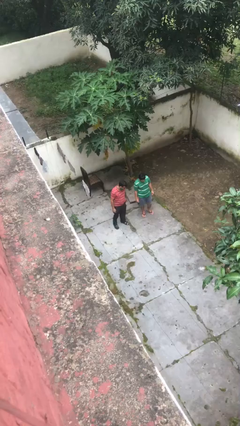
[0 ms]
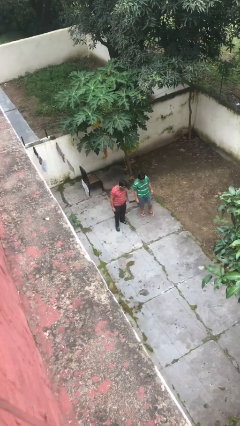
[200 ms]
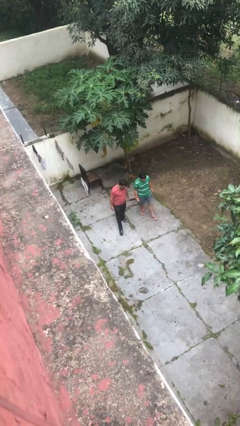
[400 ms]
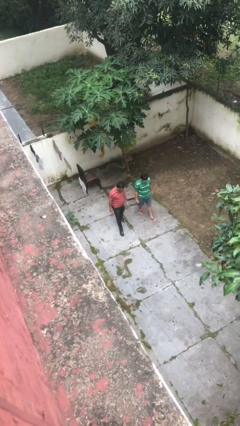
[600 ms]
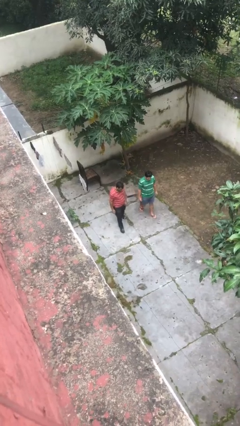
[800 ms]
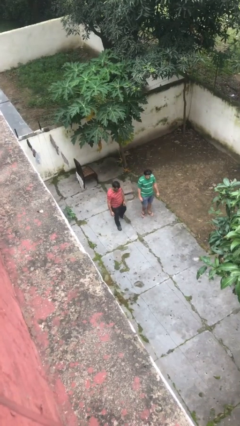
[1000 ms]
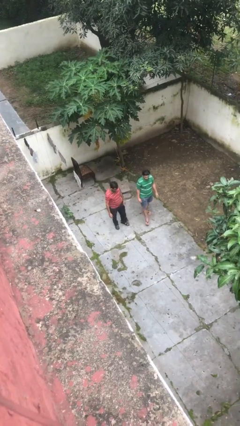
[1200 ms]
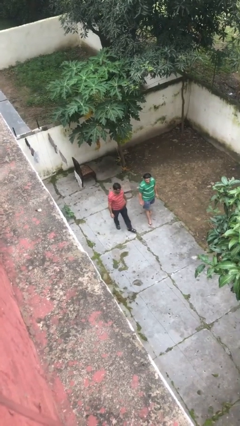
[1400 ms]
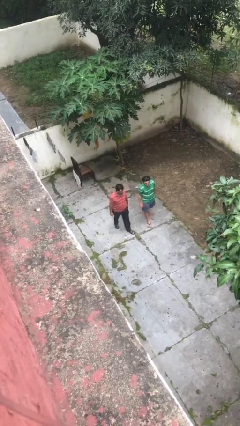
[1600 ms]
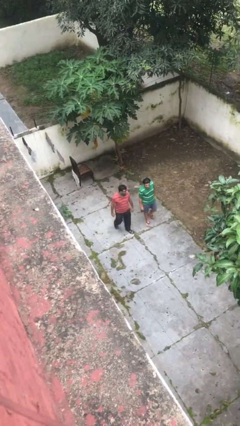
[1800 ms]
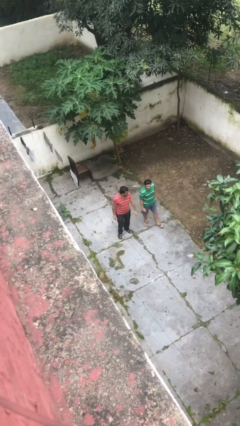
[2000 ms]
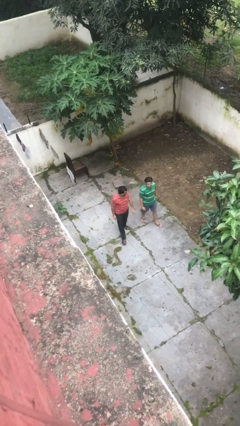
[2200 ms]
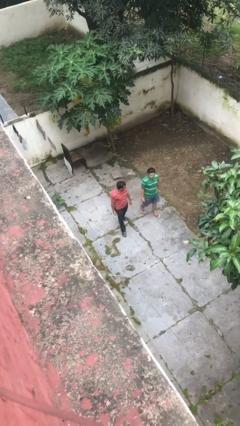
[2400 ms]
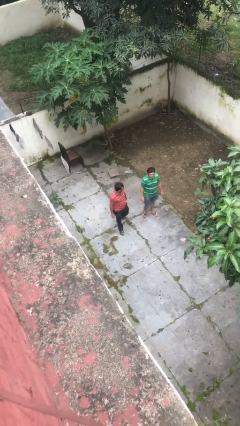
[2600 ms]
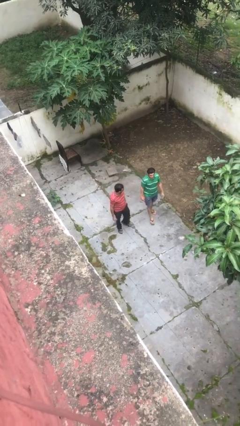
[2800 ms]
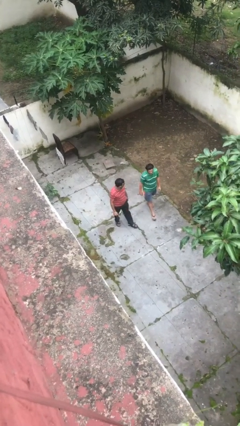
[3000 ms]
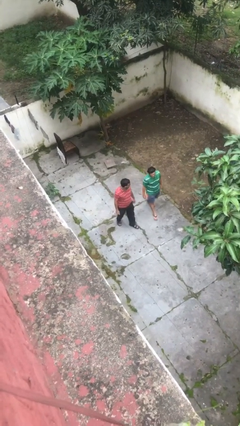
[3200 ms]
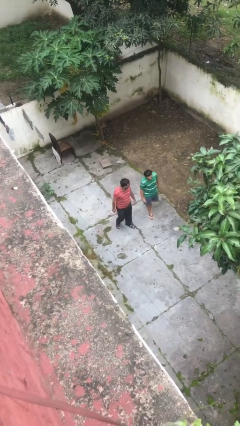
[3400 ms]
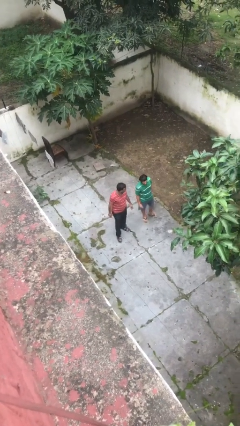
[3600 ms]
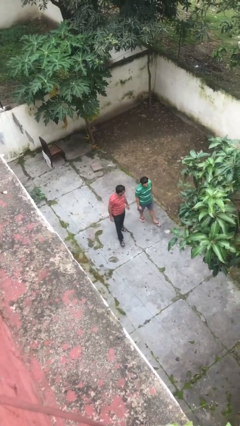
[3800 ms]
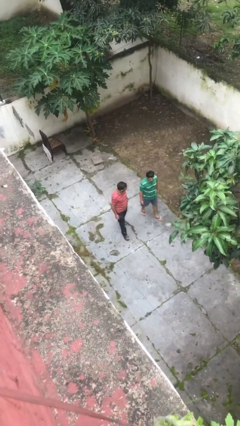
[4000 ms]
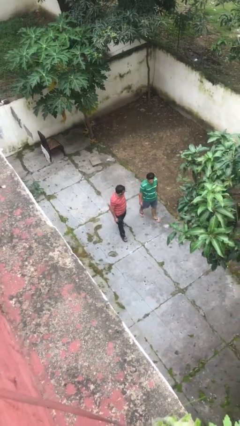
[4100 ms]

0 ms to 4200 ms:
person talks to person

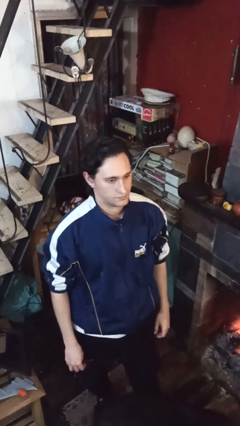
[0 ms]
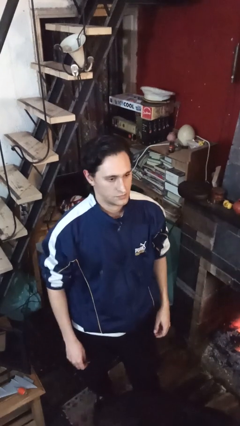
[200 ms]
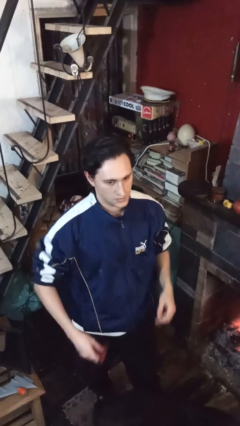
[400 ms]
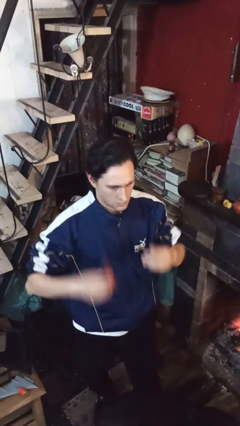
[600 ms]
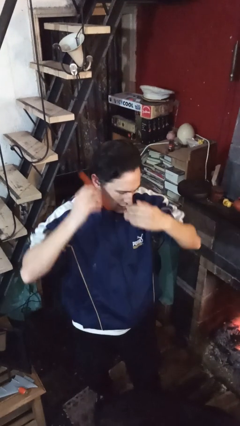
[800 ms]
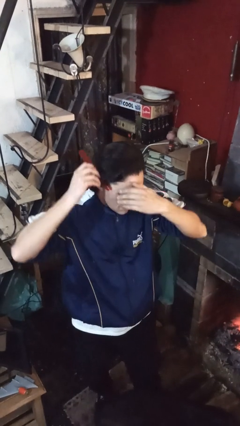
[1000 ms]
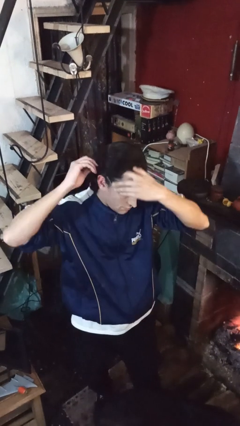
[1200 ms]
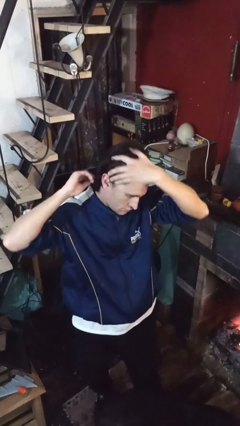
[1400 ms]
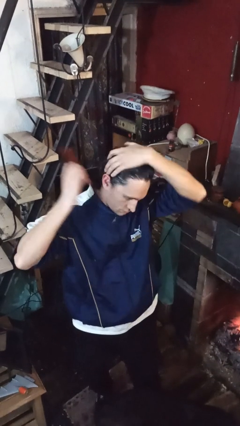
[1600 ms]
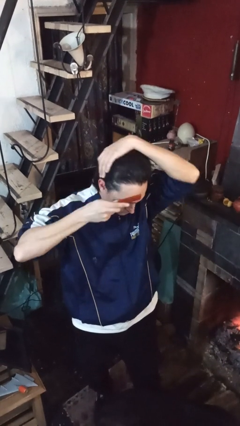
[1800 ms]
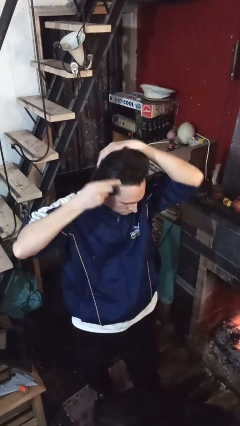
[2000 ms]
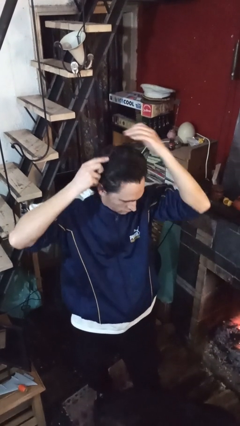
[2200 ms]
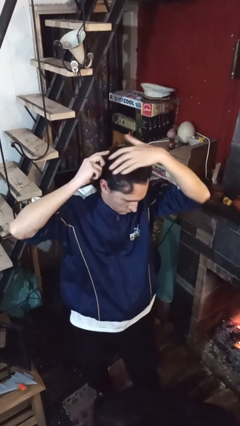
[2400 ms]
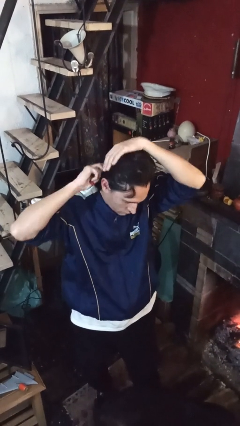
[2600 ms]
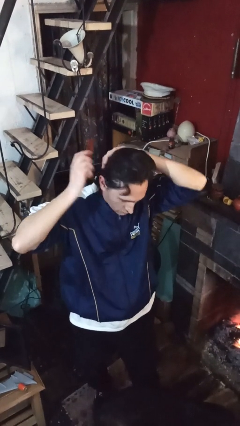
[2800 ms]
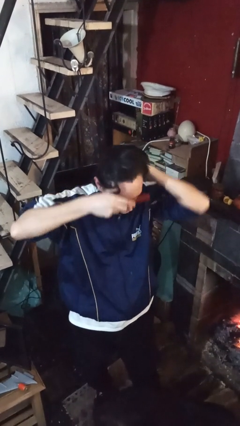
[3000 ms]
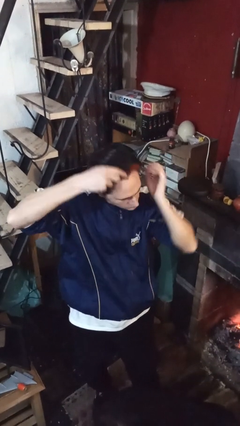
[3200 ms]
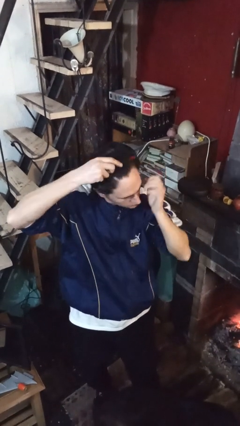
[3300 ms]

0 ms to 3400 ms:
person brushes hair

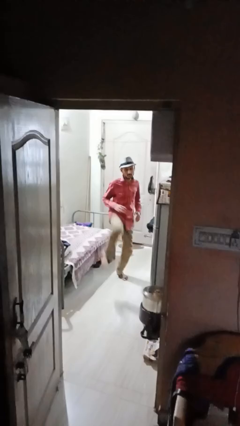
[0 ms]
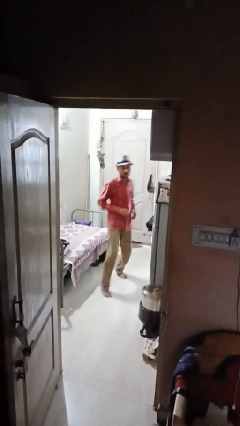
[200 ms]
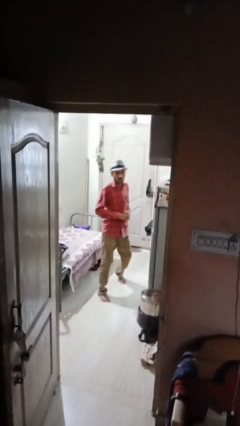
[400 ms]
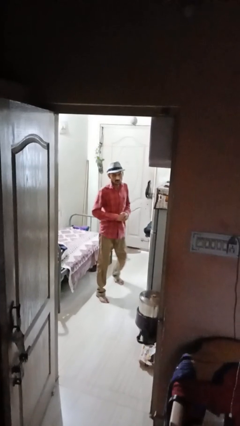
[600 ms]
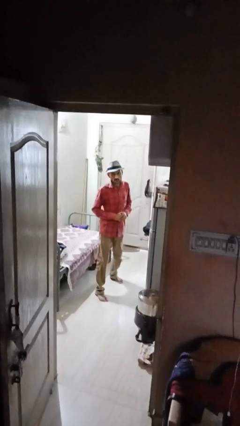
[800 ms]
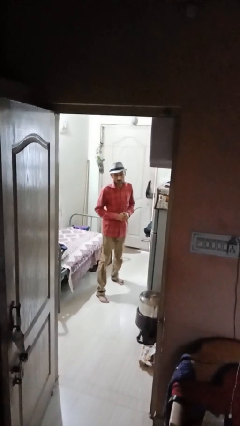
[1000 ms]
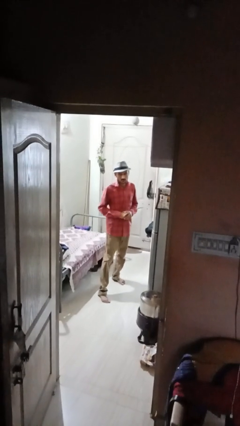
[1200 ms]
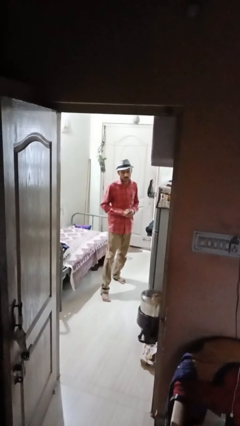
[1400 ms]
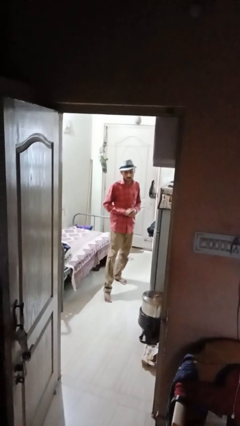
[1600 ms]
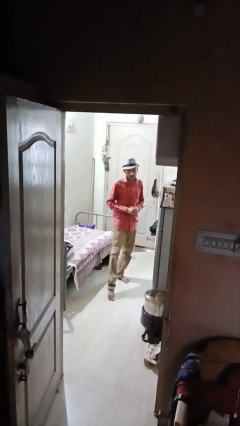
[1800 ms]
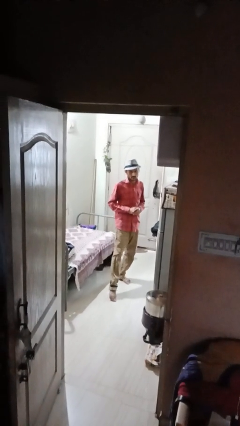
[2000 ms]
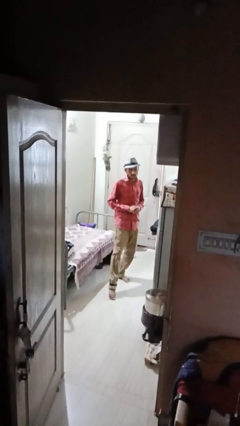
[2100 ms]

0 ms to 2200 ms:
person karate kicks

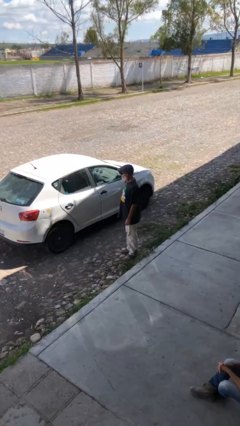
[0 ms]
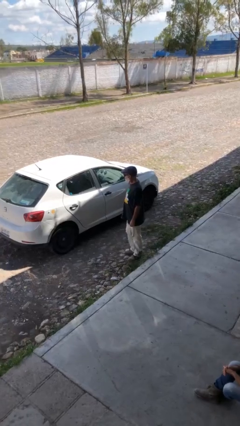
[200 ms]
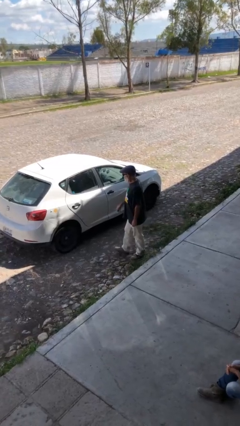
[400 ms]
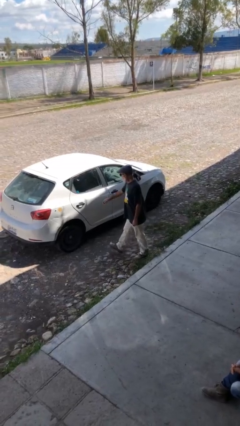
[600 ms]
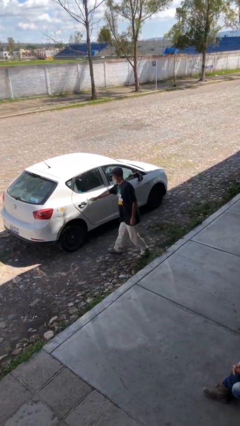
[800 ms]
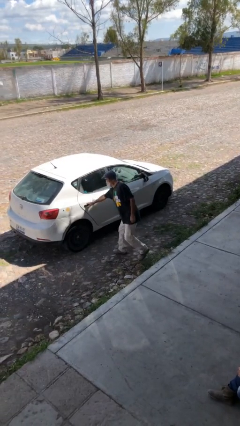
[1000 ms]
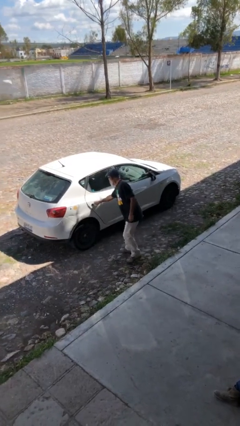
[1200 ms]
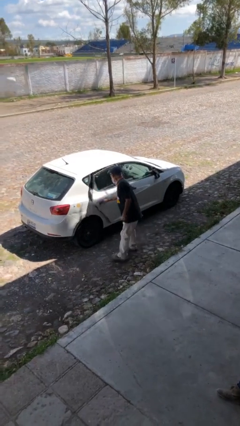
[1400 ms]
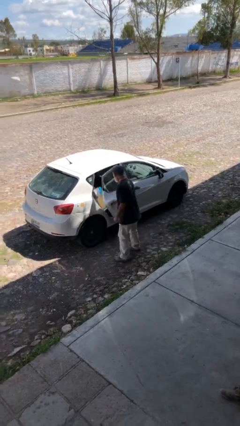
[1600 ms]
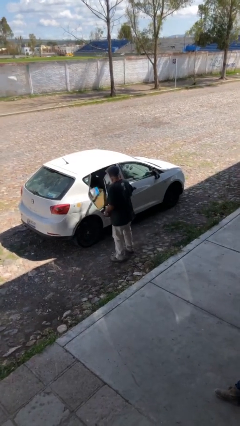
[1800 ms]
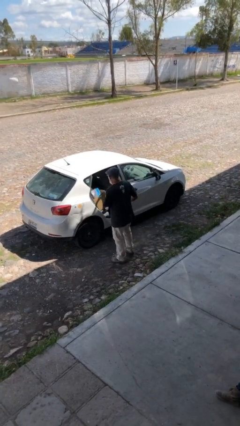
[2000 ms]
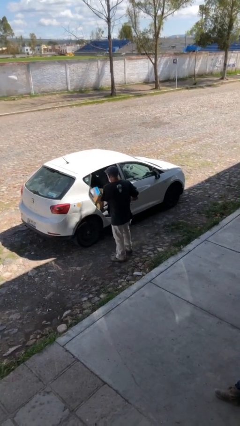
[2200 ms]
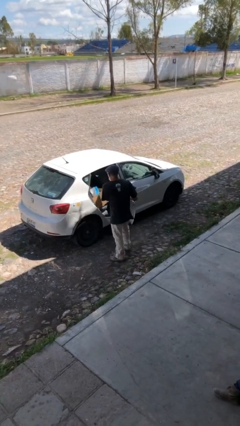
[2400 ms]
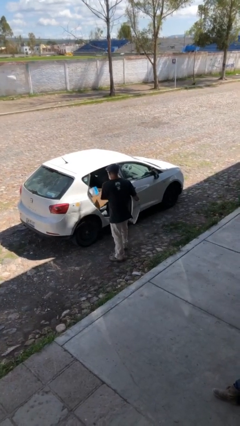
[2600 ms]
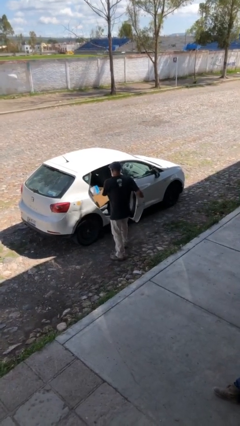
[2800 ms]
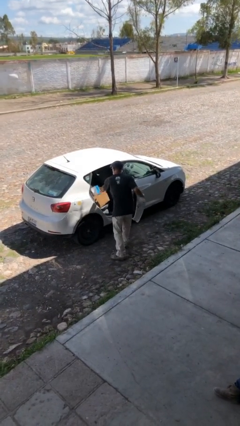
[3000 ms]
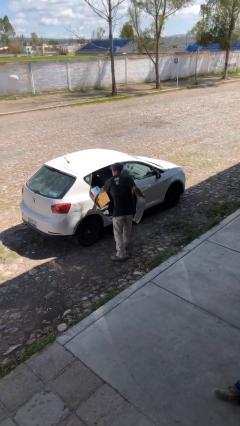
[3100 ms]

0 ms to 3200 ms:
person opens car door

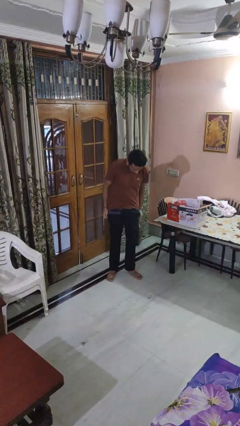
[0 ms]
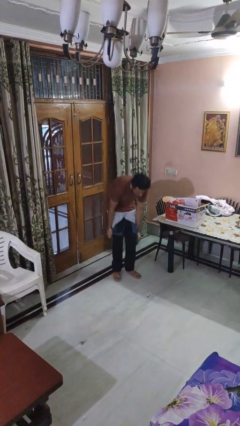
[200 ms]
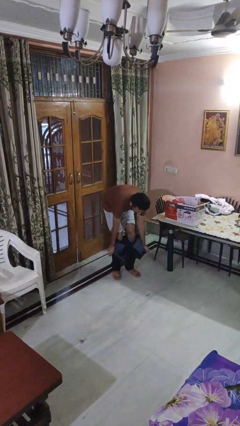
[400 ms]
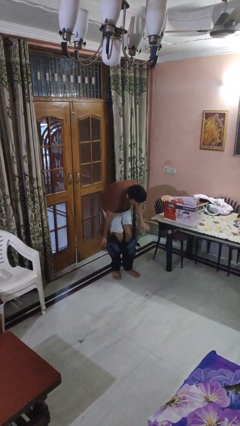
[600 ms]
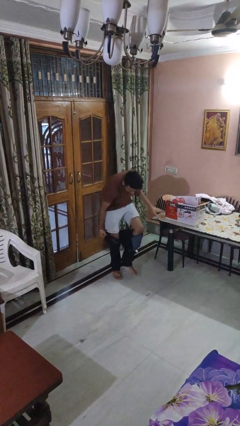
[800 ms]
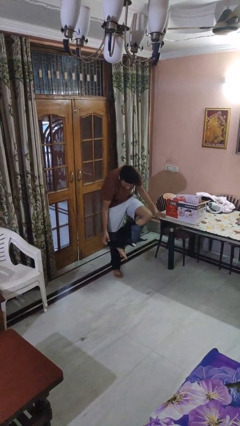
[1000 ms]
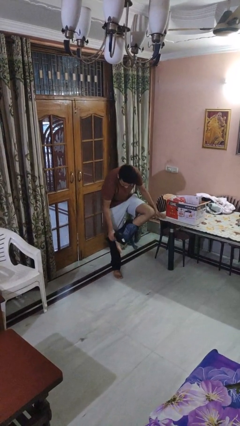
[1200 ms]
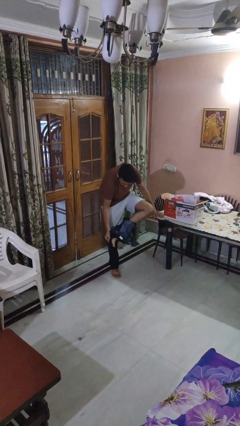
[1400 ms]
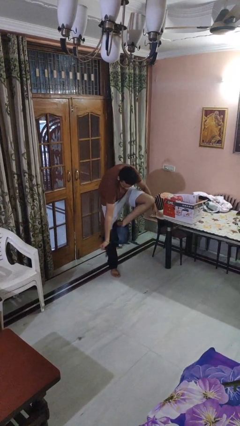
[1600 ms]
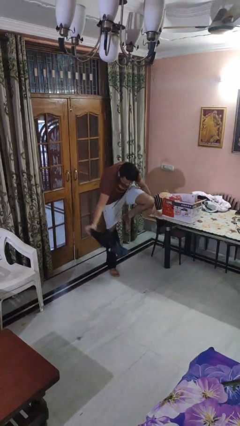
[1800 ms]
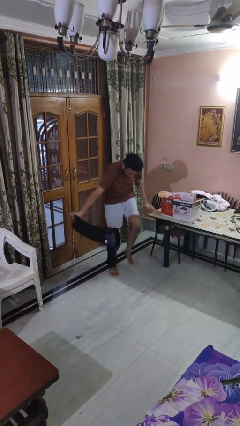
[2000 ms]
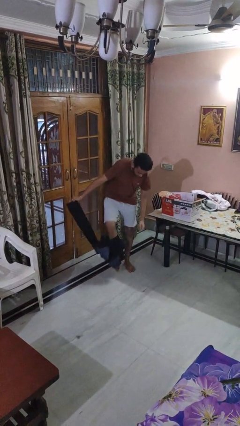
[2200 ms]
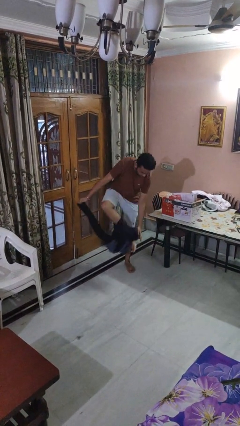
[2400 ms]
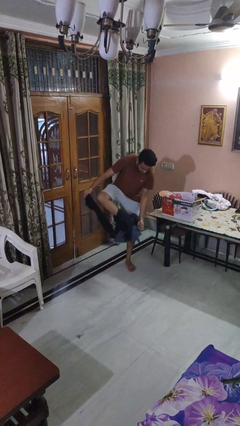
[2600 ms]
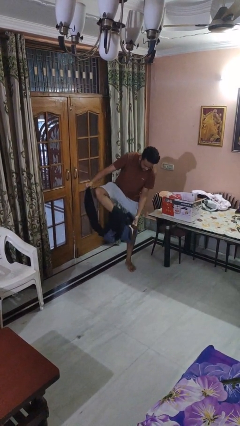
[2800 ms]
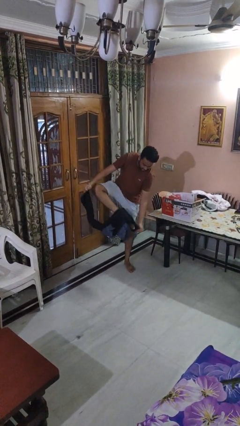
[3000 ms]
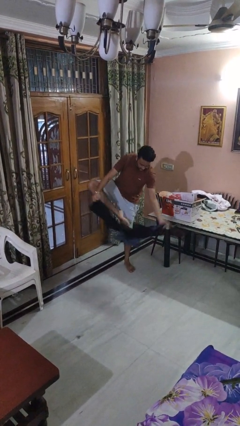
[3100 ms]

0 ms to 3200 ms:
person takes off pants

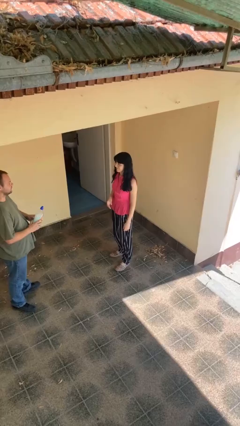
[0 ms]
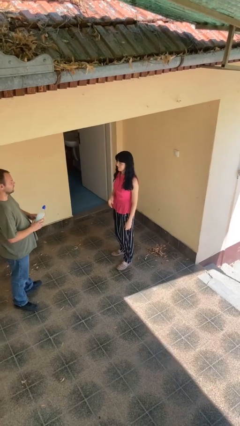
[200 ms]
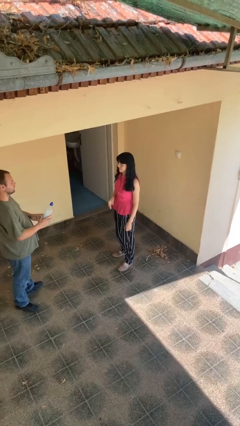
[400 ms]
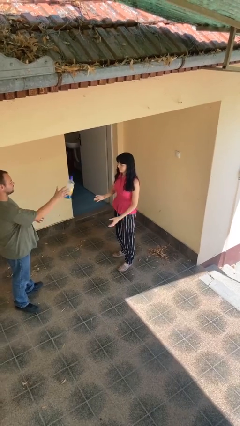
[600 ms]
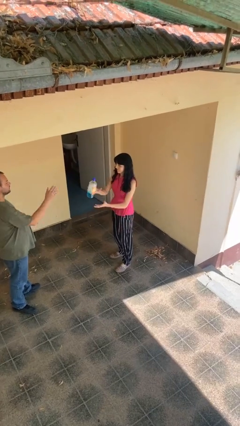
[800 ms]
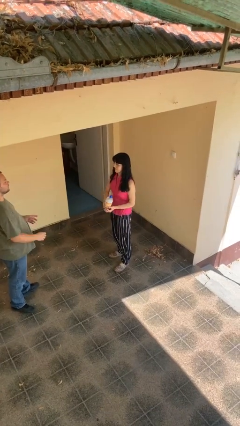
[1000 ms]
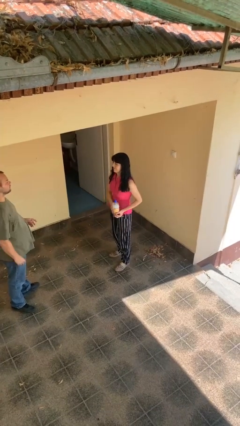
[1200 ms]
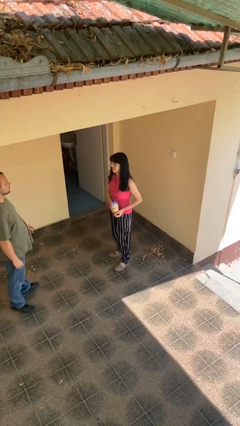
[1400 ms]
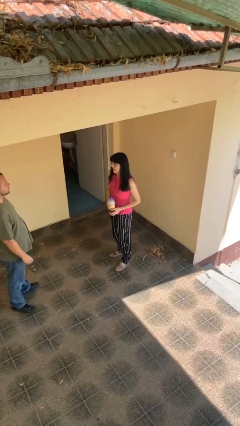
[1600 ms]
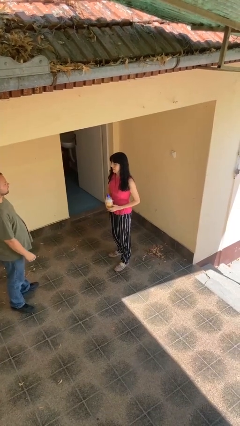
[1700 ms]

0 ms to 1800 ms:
person catches object from person
